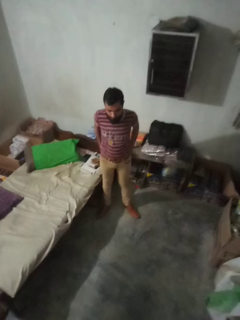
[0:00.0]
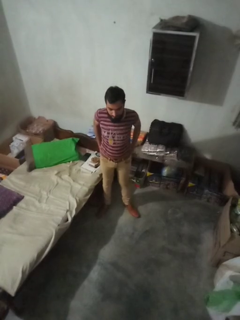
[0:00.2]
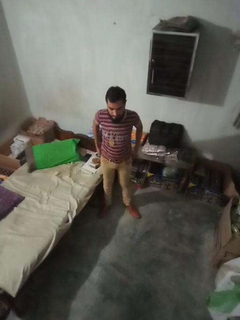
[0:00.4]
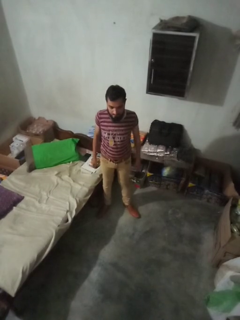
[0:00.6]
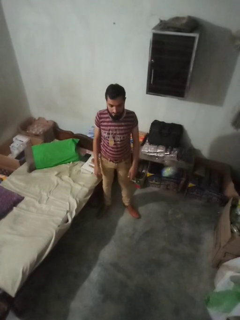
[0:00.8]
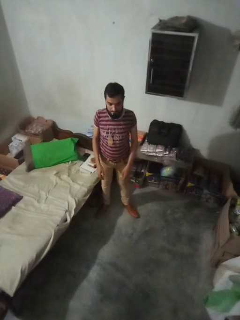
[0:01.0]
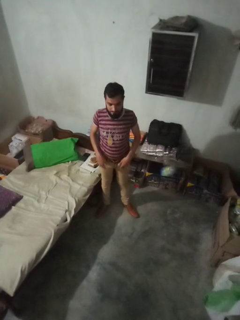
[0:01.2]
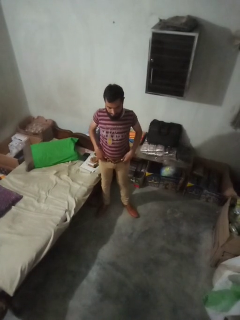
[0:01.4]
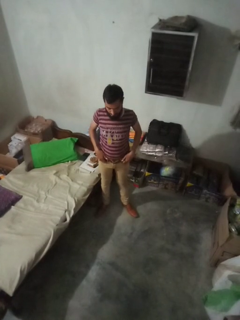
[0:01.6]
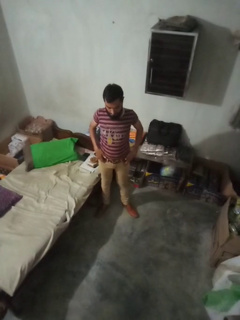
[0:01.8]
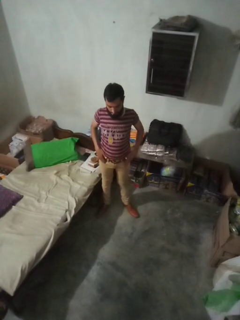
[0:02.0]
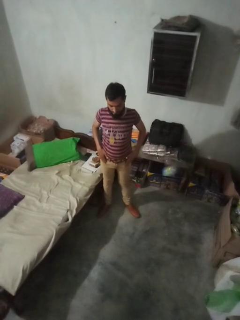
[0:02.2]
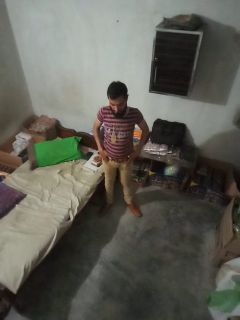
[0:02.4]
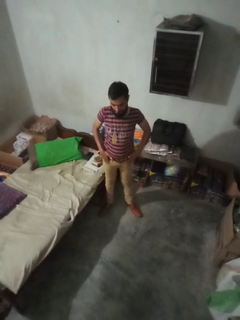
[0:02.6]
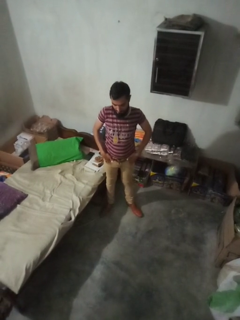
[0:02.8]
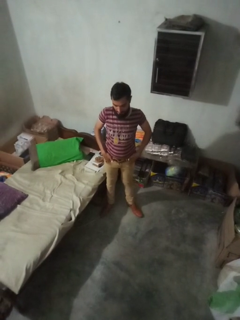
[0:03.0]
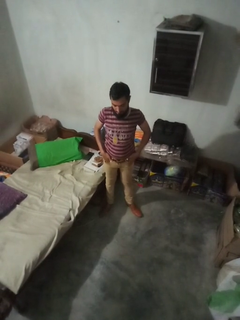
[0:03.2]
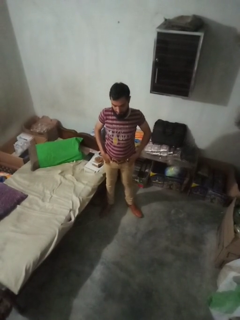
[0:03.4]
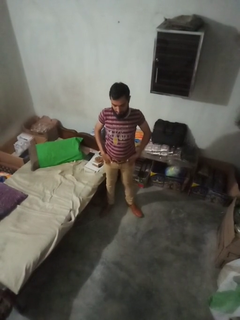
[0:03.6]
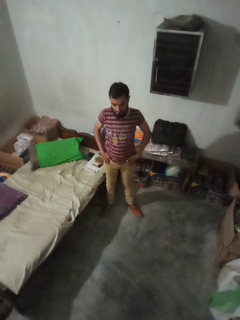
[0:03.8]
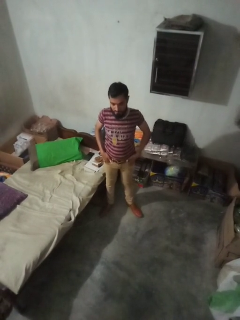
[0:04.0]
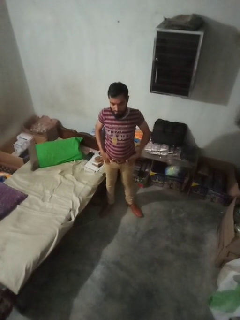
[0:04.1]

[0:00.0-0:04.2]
person puts hands in back pockets

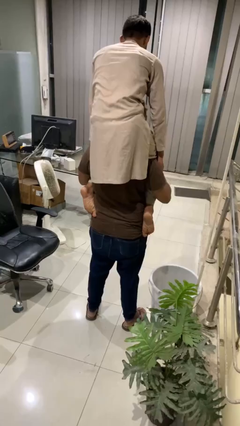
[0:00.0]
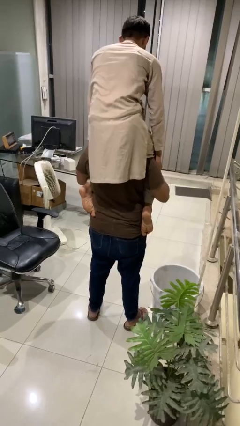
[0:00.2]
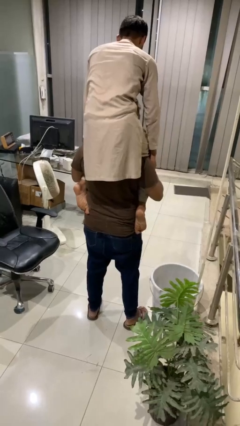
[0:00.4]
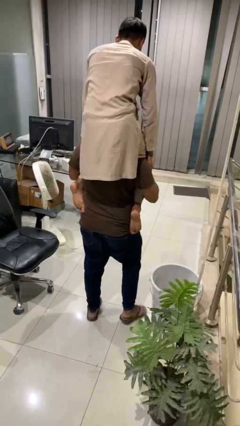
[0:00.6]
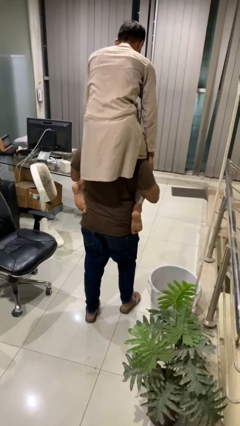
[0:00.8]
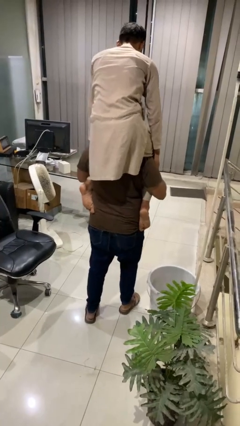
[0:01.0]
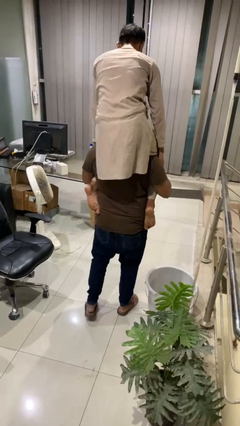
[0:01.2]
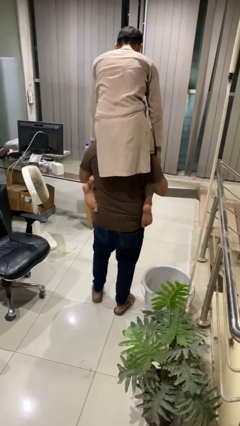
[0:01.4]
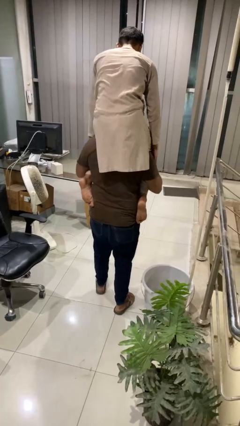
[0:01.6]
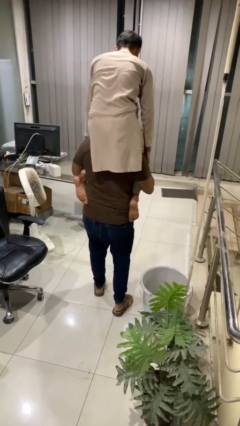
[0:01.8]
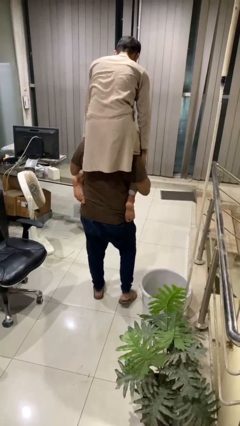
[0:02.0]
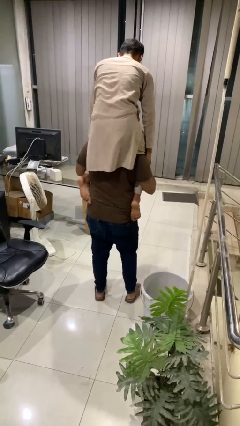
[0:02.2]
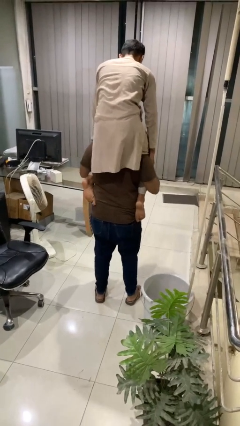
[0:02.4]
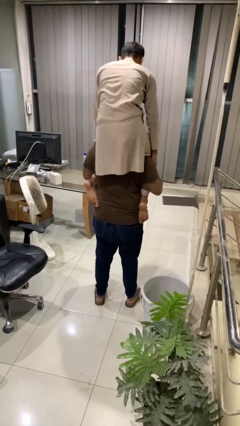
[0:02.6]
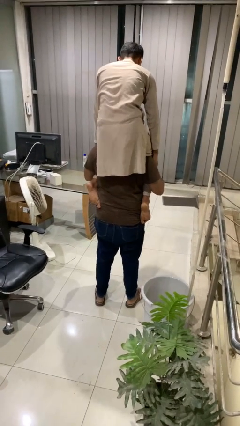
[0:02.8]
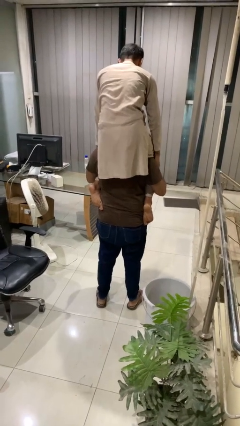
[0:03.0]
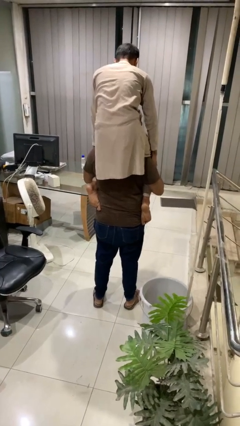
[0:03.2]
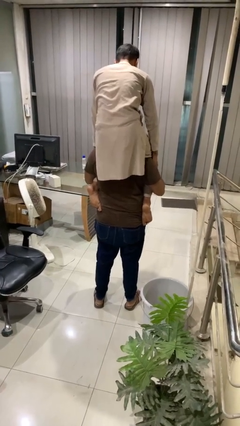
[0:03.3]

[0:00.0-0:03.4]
person carries person on shoulders

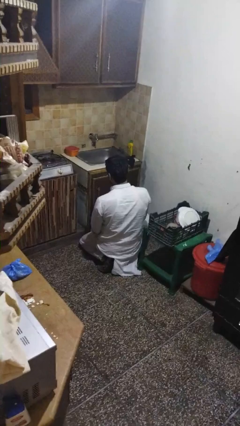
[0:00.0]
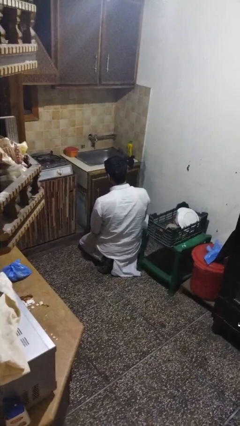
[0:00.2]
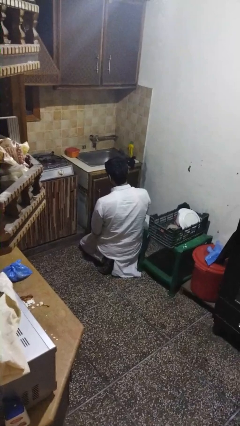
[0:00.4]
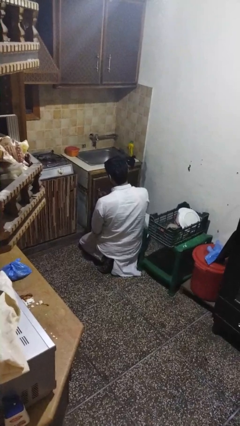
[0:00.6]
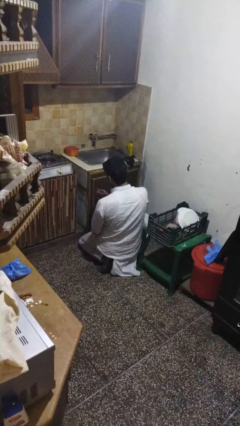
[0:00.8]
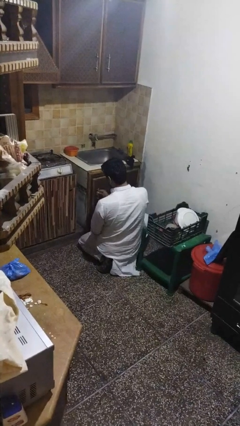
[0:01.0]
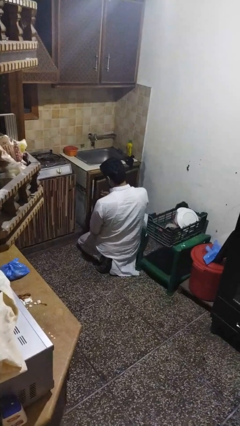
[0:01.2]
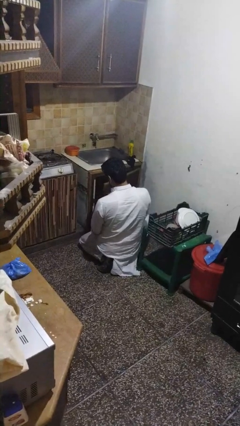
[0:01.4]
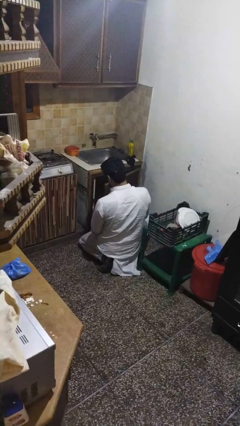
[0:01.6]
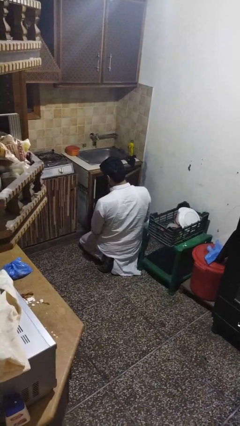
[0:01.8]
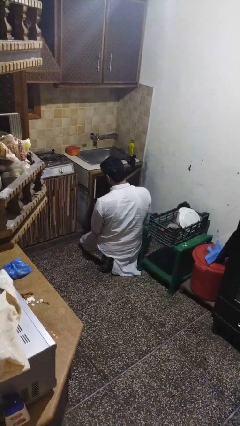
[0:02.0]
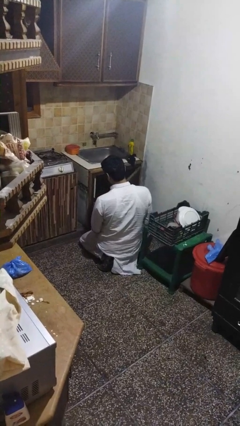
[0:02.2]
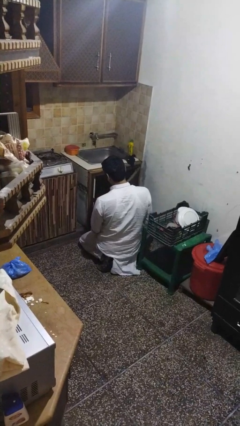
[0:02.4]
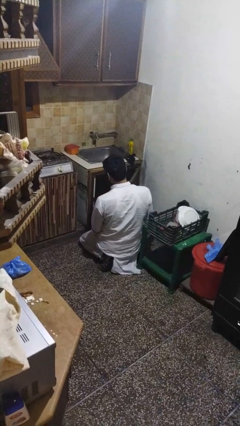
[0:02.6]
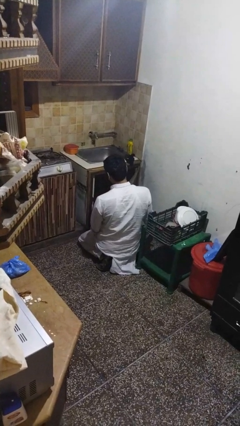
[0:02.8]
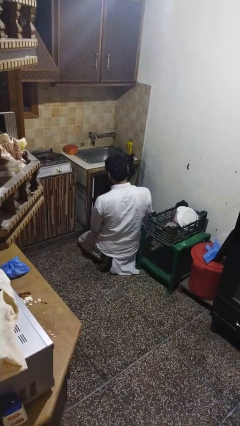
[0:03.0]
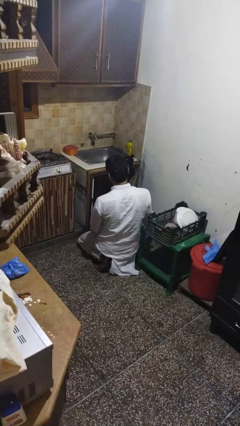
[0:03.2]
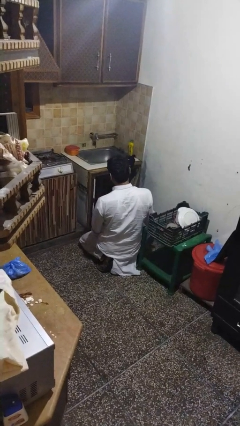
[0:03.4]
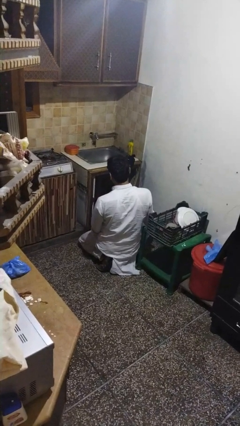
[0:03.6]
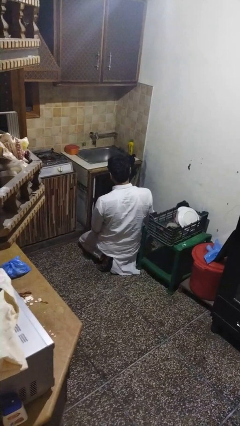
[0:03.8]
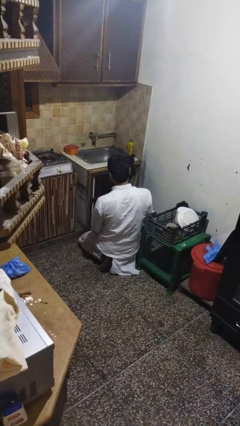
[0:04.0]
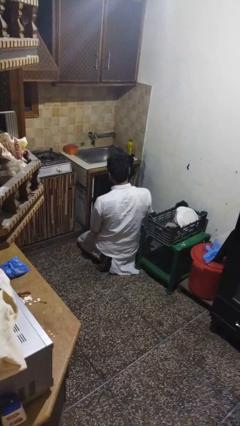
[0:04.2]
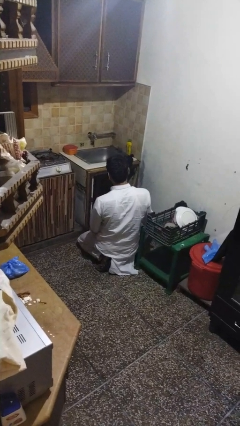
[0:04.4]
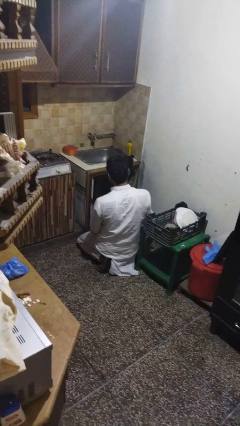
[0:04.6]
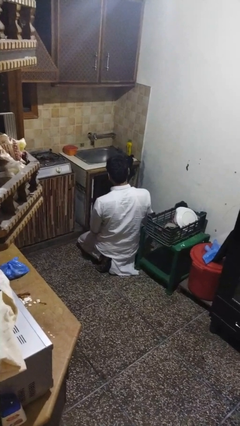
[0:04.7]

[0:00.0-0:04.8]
person opens cabinet

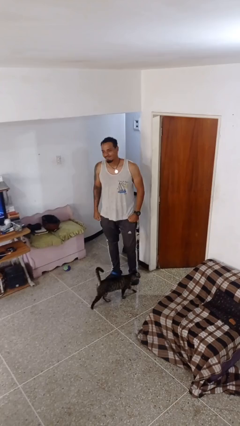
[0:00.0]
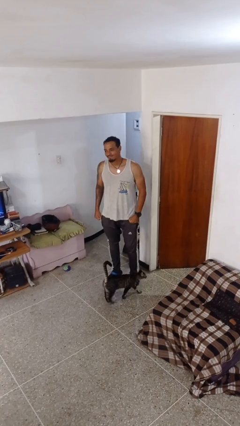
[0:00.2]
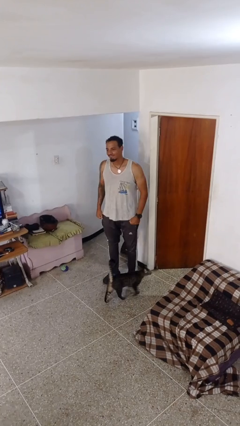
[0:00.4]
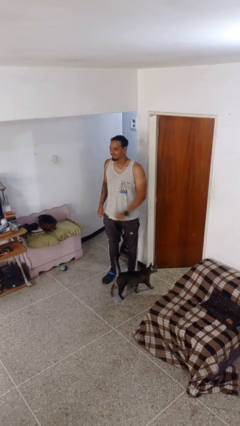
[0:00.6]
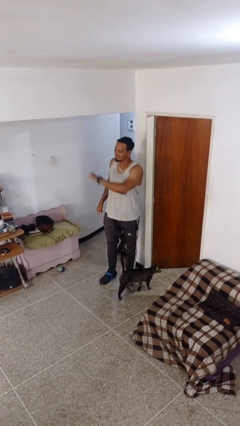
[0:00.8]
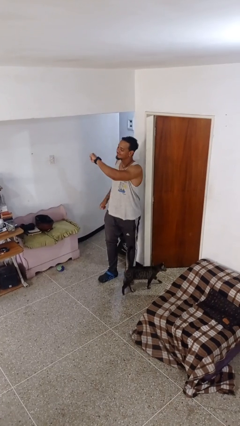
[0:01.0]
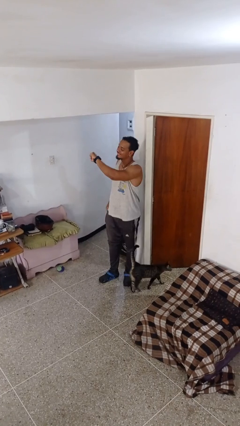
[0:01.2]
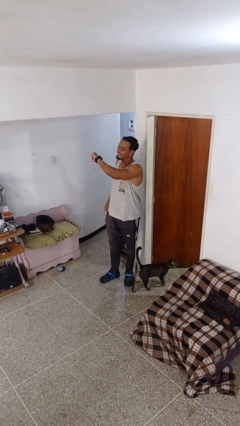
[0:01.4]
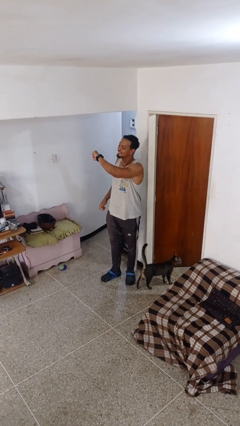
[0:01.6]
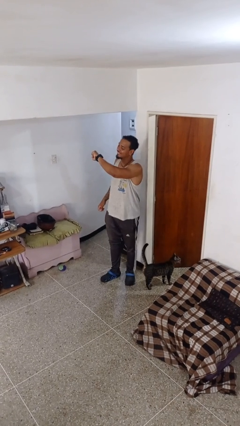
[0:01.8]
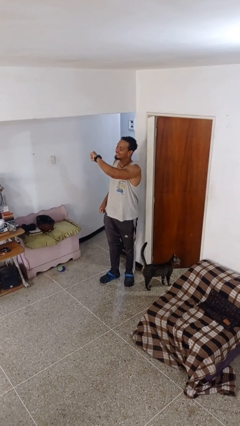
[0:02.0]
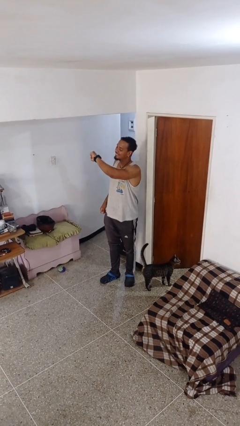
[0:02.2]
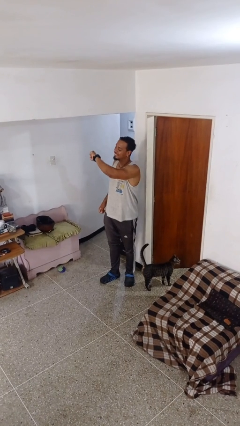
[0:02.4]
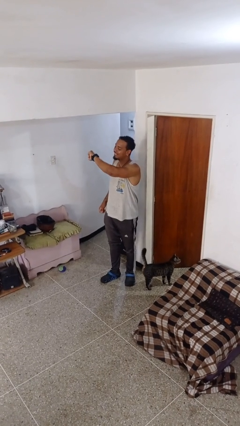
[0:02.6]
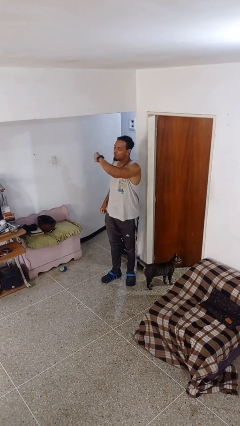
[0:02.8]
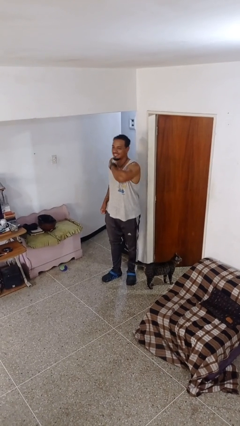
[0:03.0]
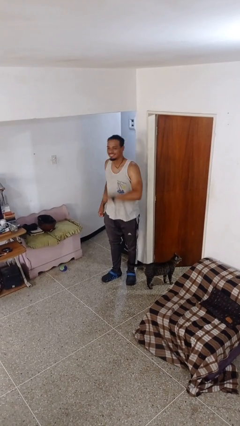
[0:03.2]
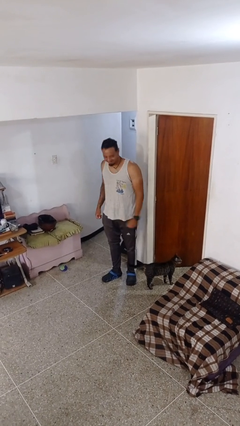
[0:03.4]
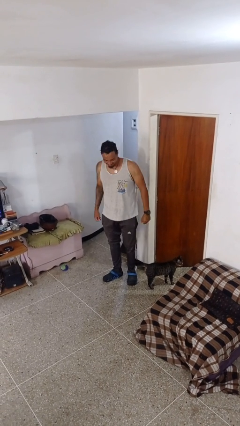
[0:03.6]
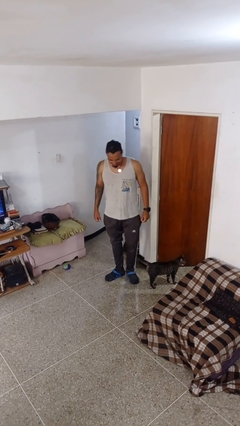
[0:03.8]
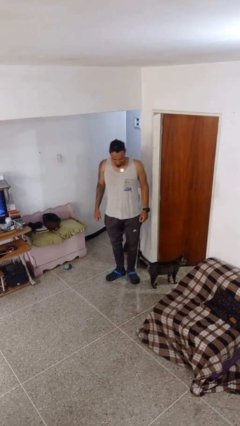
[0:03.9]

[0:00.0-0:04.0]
person looks at wristwatch

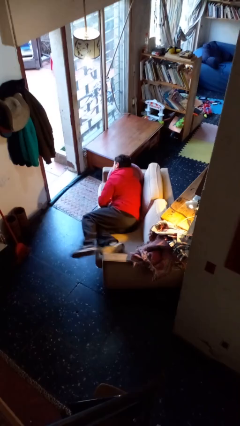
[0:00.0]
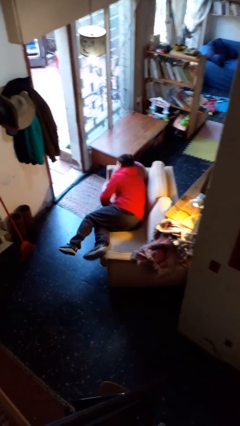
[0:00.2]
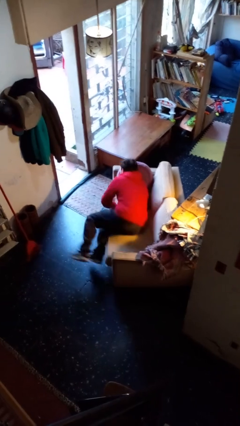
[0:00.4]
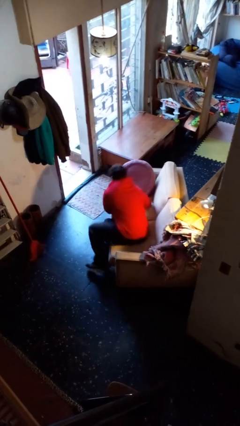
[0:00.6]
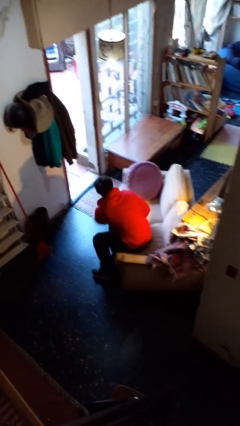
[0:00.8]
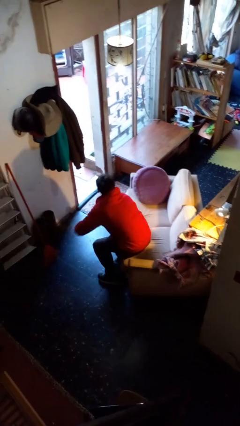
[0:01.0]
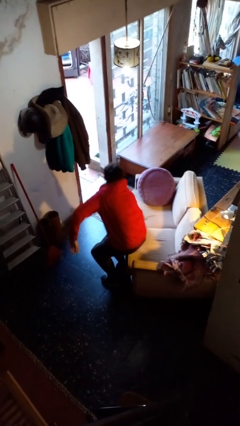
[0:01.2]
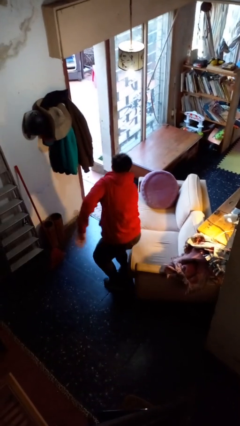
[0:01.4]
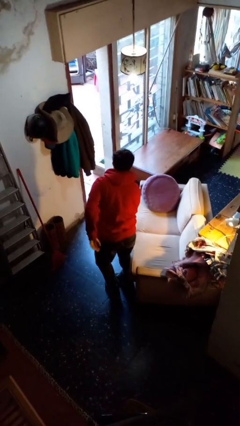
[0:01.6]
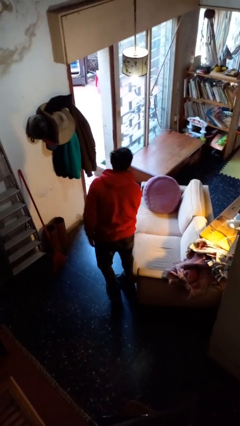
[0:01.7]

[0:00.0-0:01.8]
person stands up

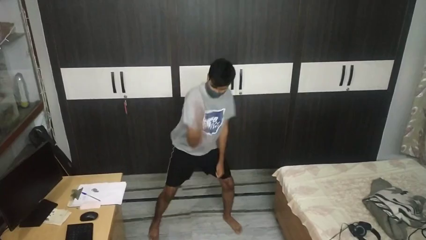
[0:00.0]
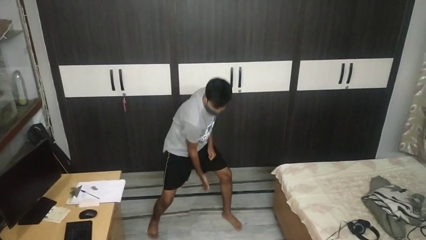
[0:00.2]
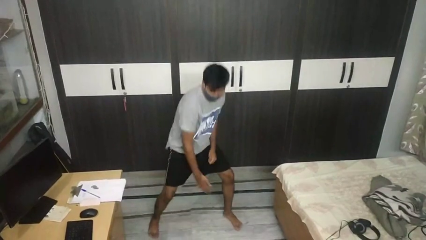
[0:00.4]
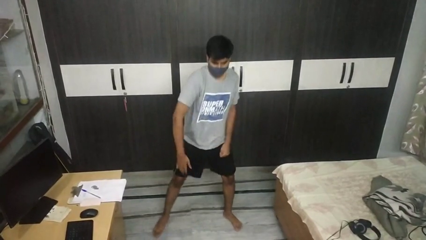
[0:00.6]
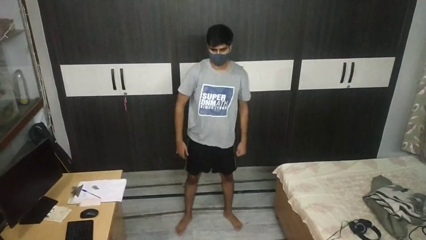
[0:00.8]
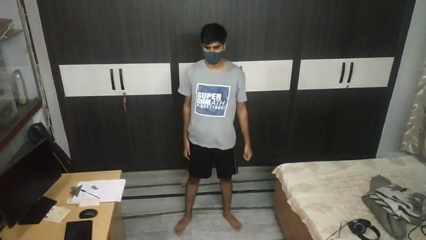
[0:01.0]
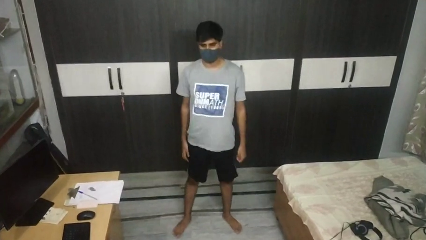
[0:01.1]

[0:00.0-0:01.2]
person karate chop
